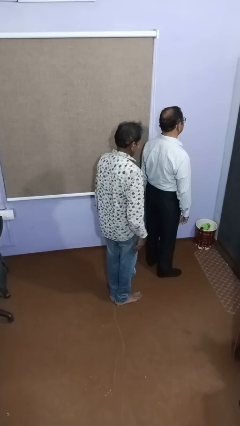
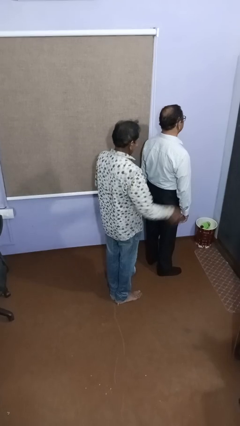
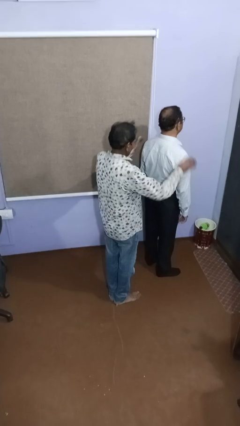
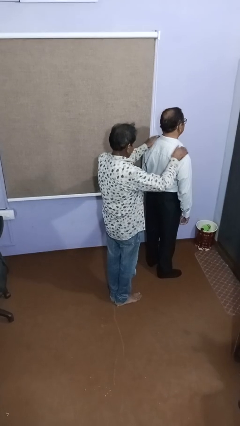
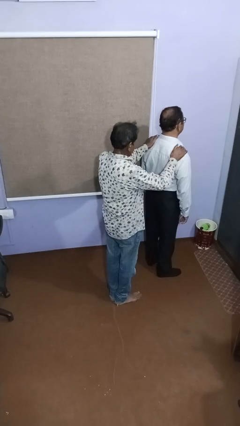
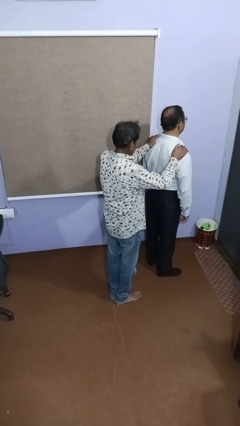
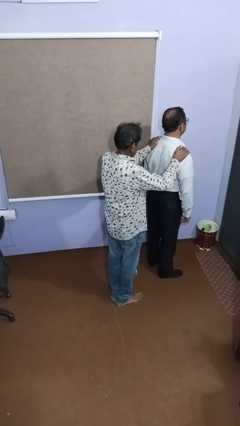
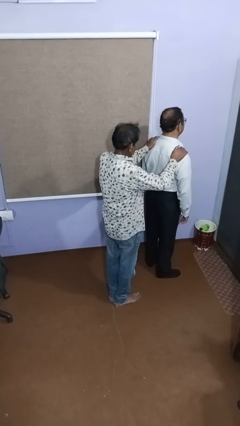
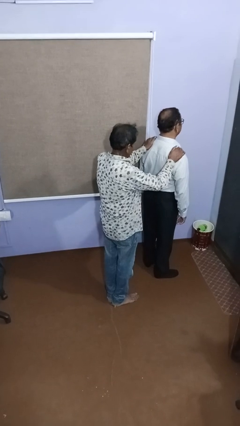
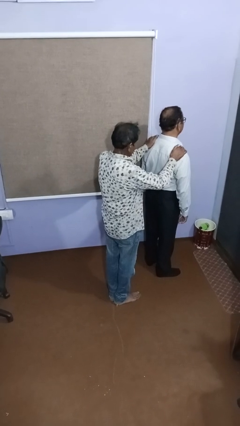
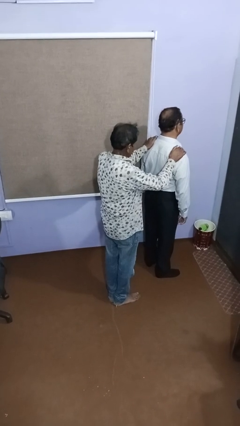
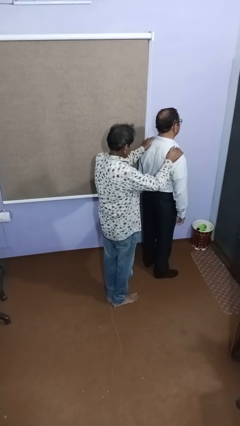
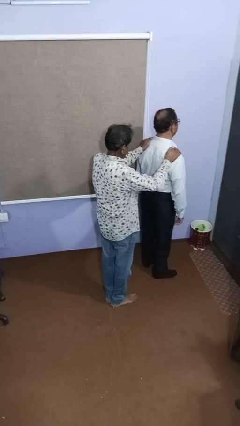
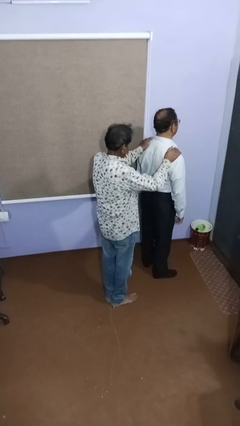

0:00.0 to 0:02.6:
person grabs person by shoulder

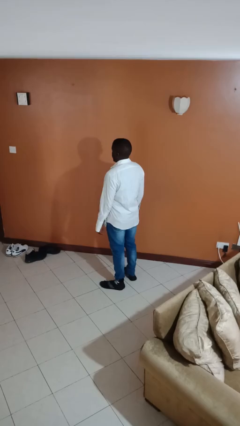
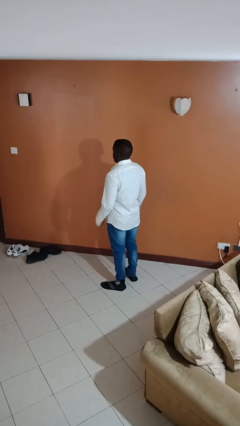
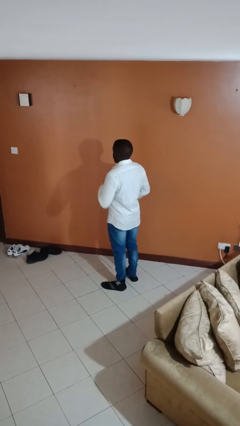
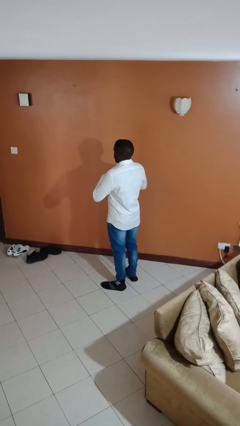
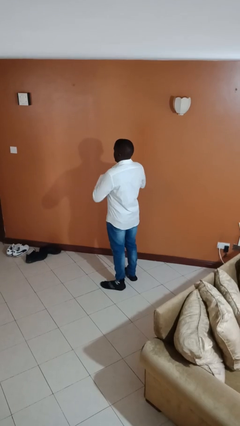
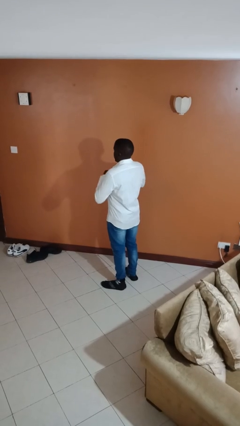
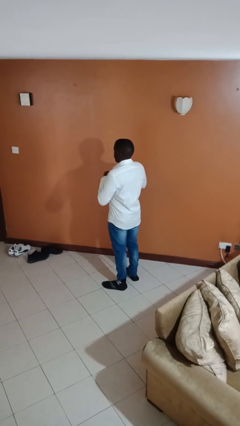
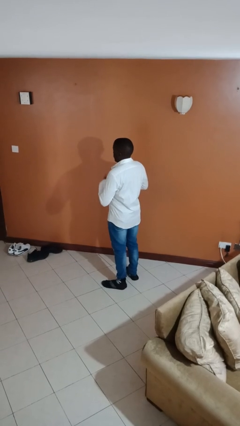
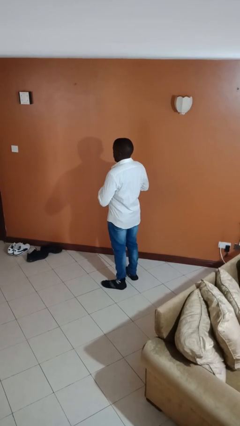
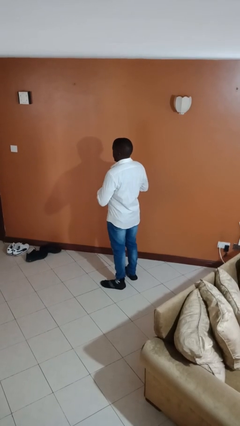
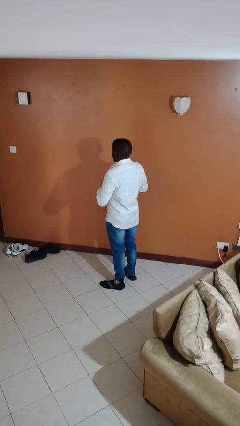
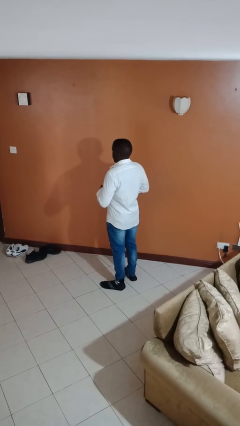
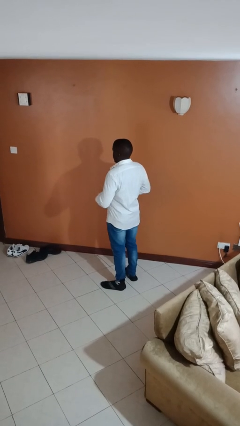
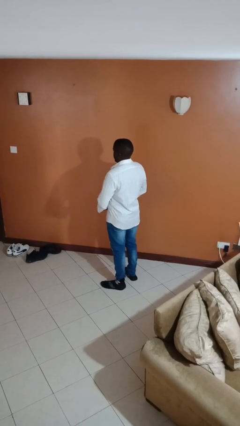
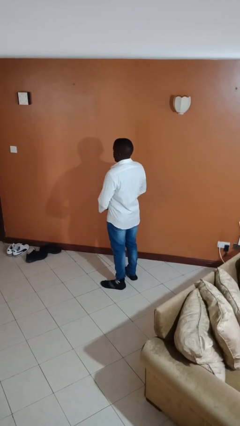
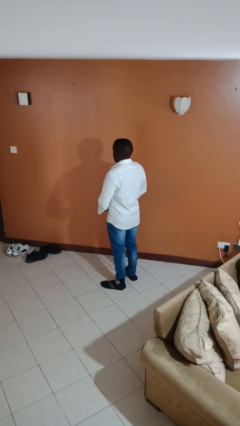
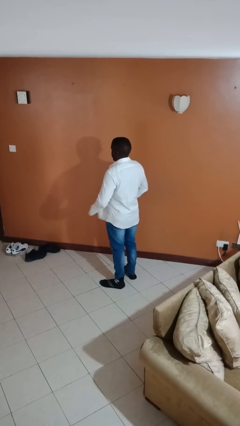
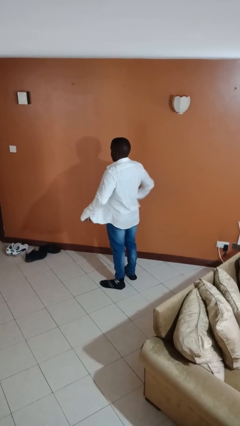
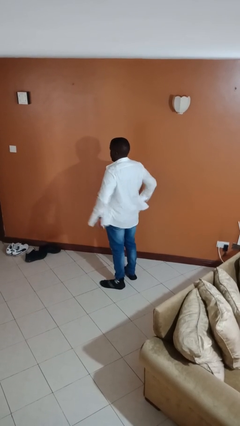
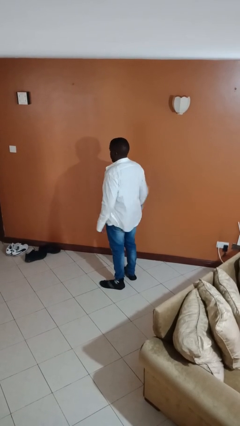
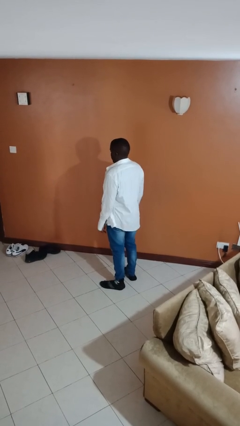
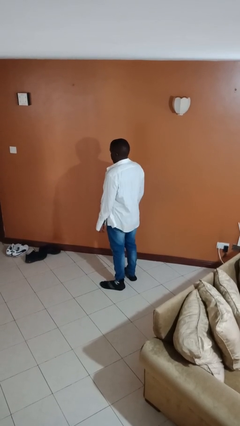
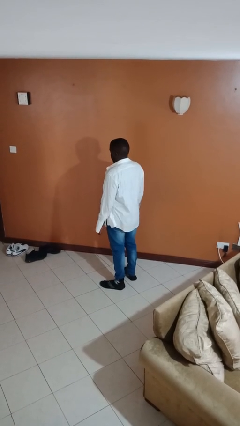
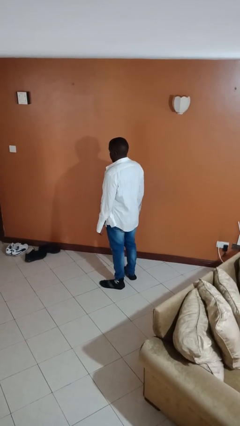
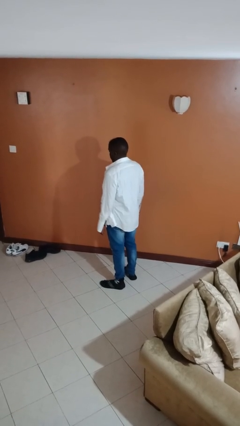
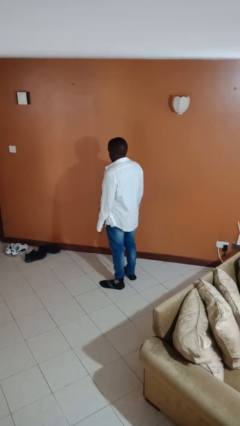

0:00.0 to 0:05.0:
person unbuttons shirt

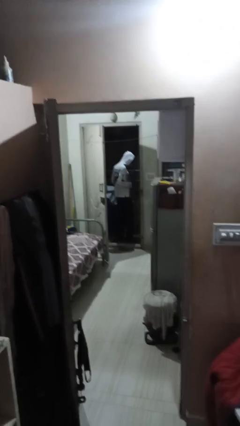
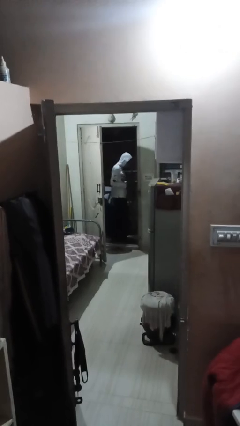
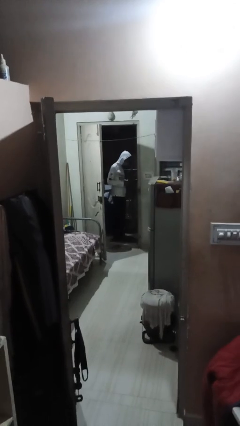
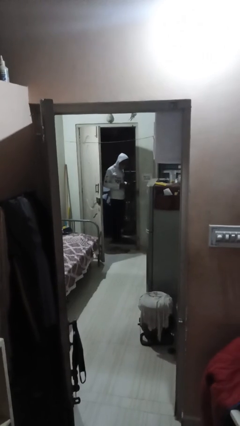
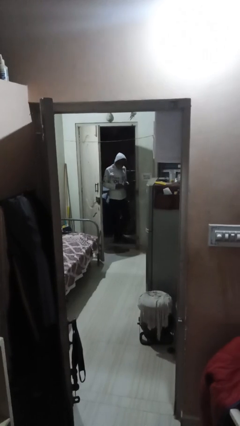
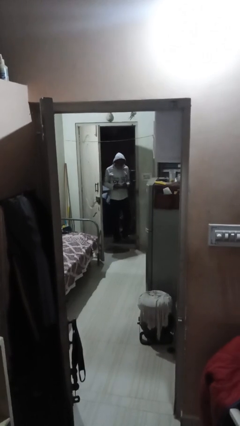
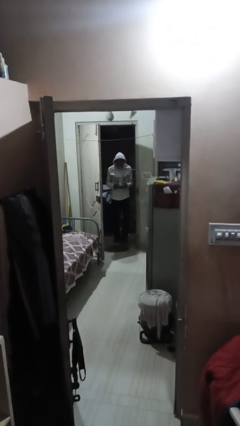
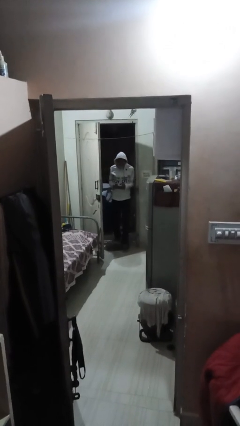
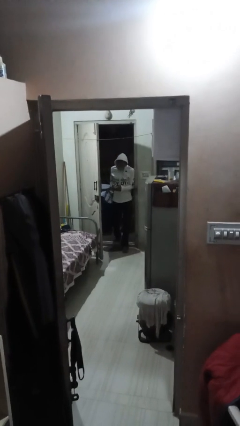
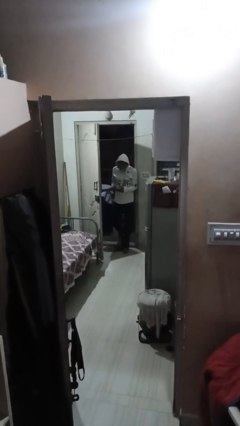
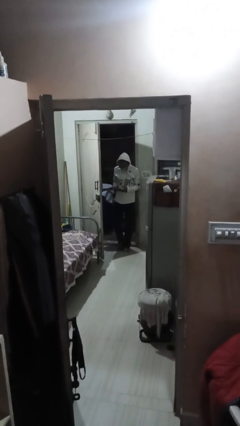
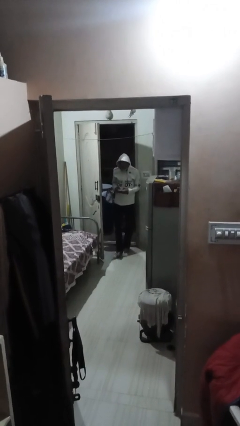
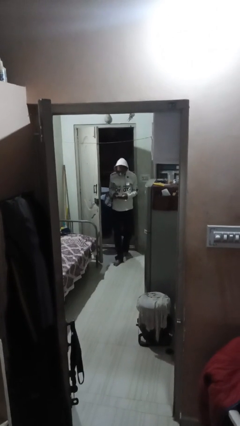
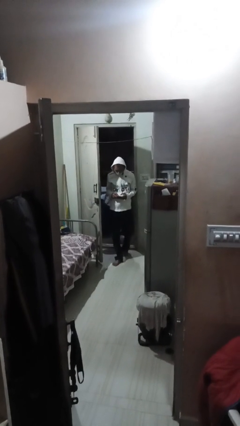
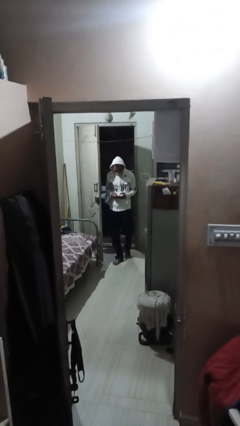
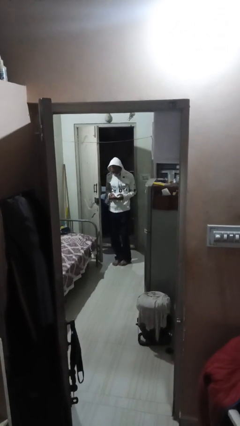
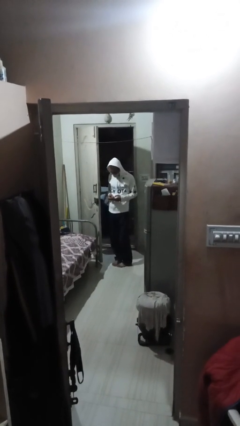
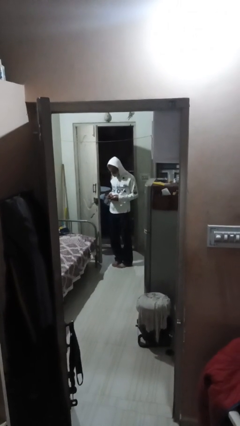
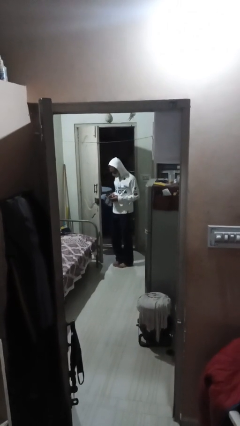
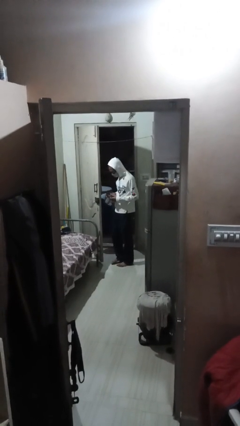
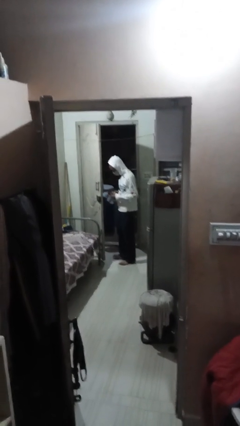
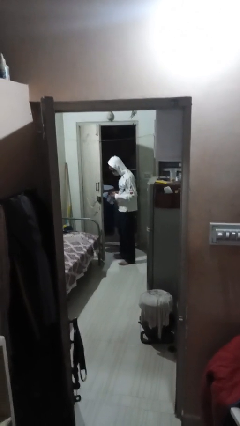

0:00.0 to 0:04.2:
person enters scene through structure

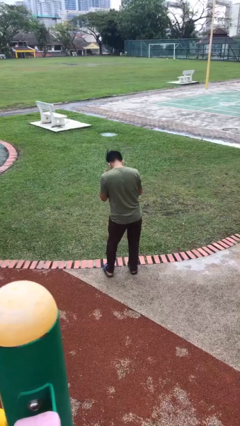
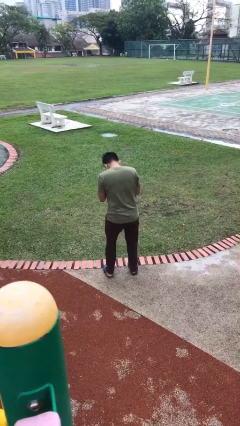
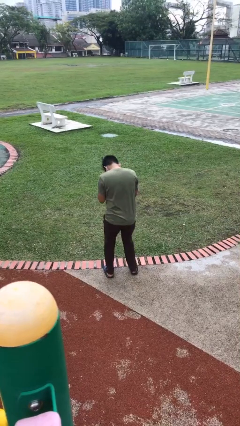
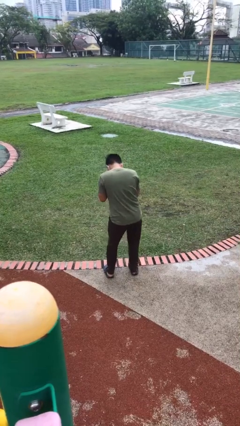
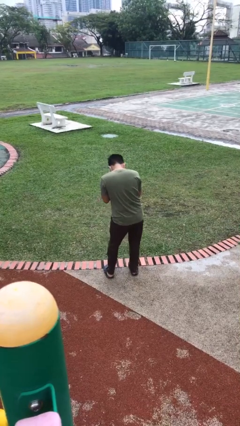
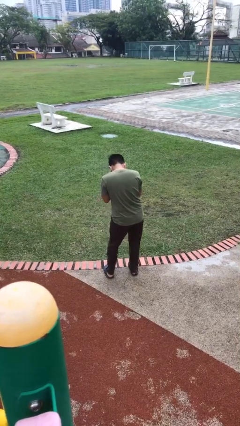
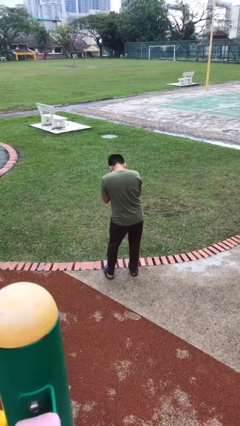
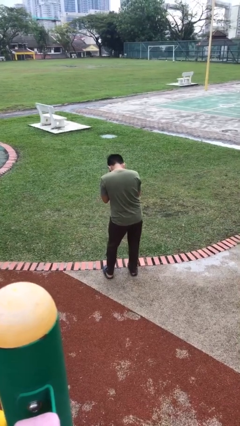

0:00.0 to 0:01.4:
person wiggles hips

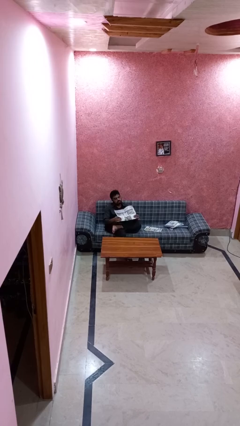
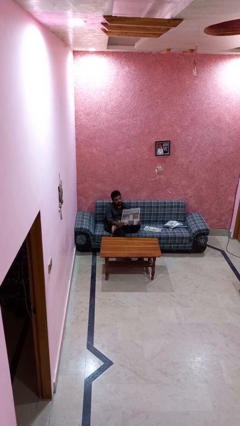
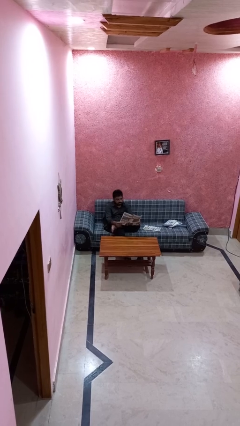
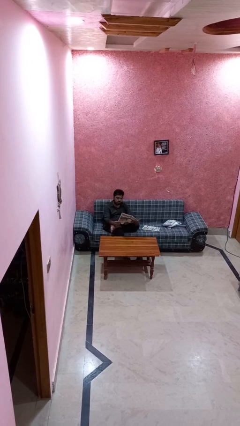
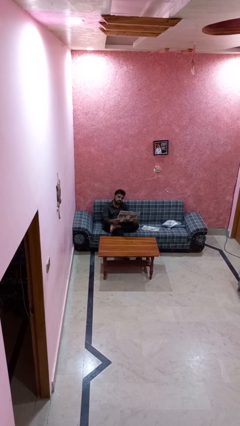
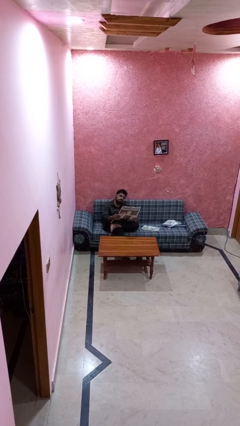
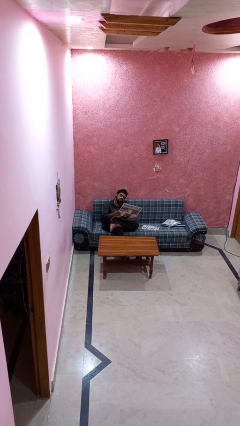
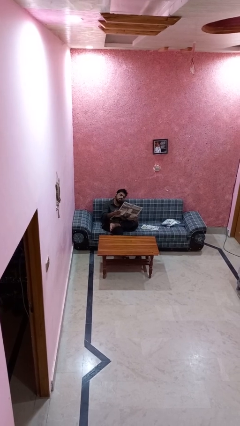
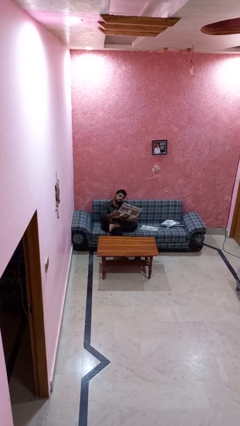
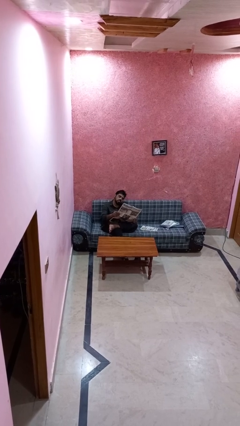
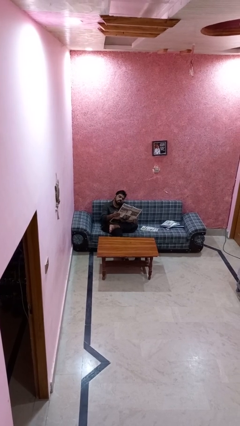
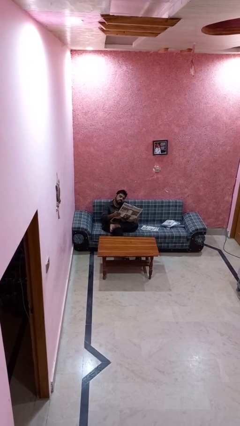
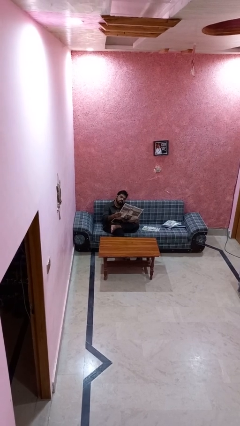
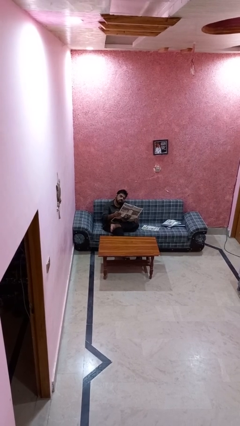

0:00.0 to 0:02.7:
person reads newspaper

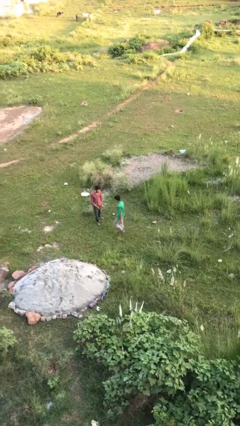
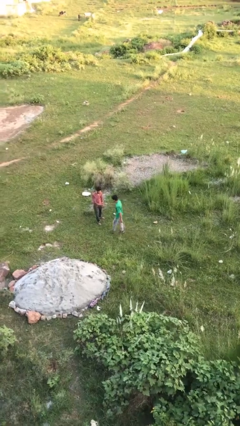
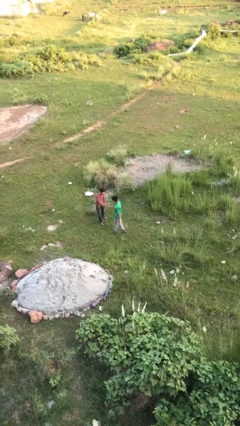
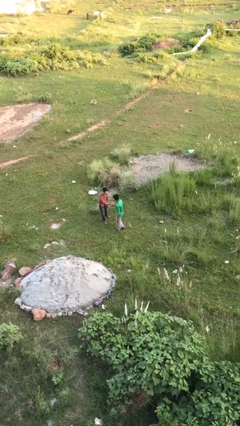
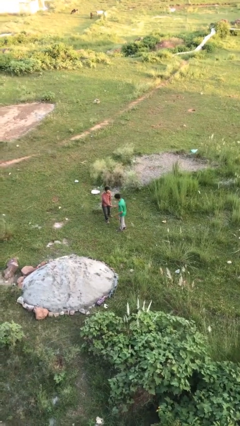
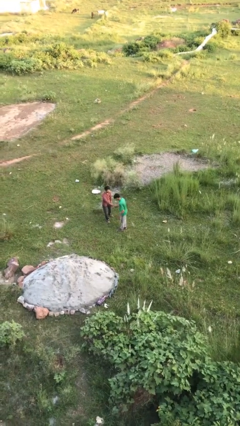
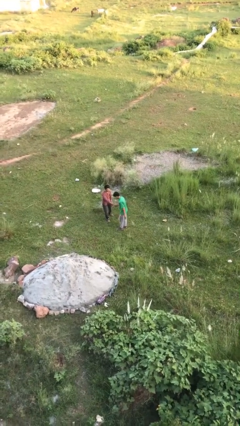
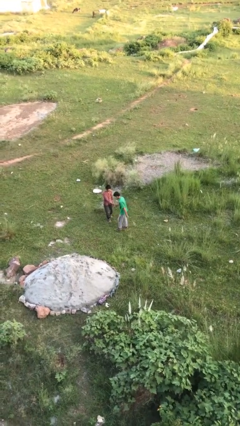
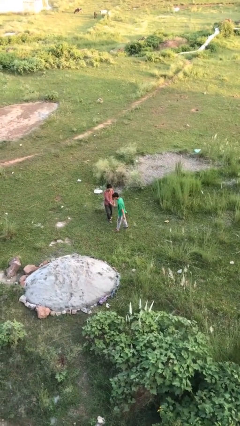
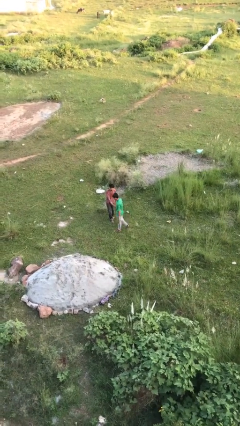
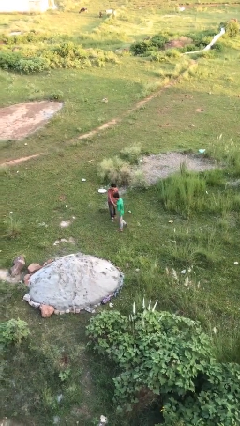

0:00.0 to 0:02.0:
person shakes hand
